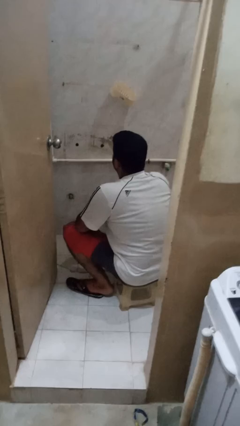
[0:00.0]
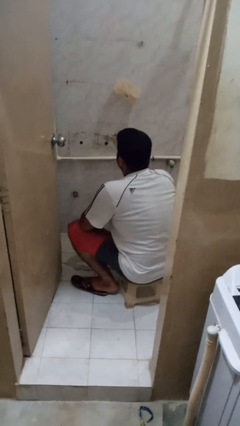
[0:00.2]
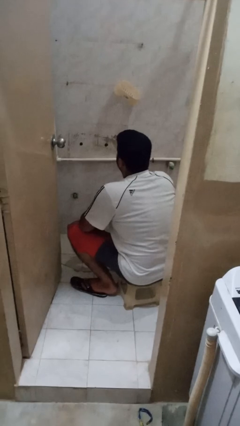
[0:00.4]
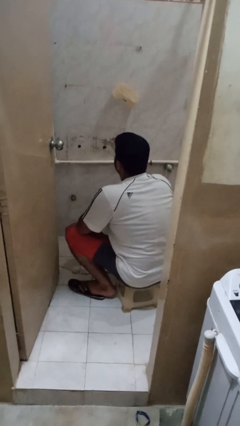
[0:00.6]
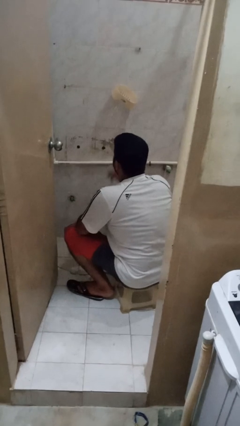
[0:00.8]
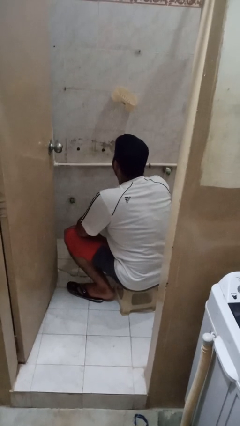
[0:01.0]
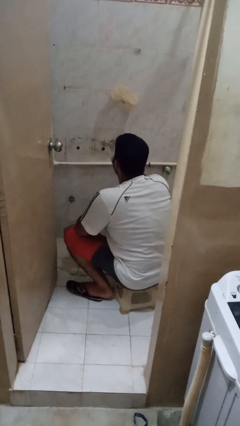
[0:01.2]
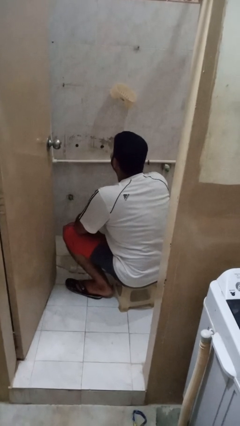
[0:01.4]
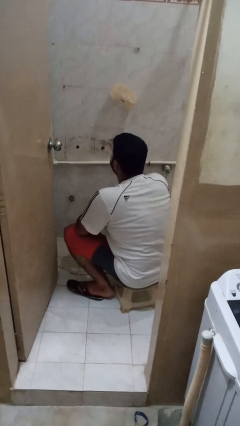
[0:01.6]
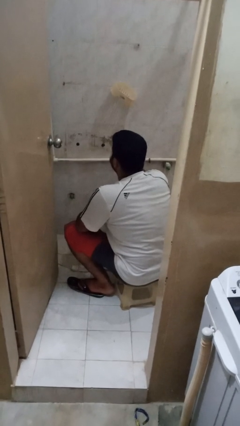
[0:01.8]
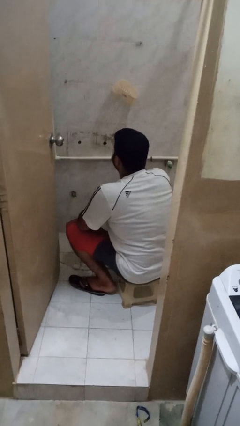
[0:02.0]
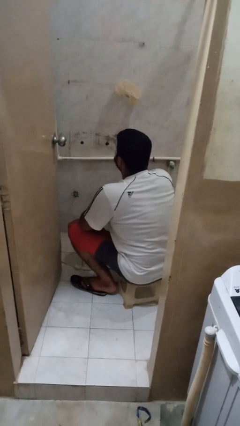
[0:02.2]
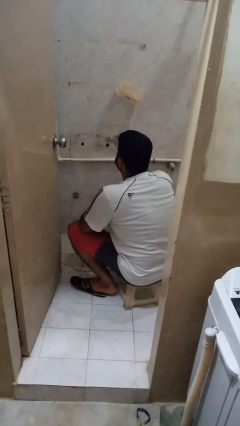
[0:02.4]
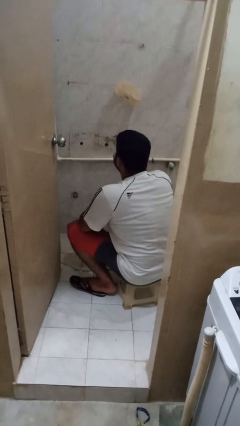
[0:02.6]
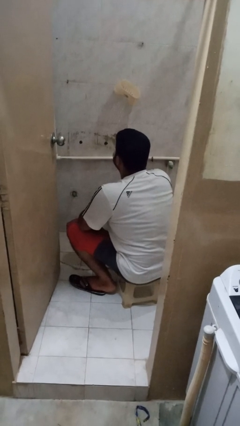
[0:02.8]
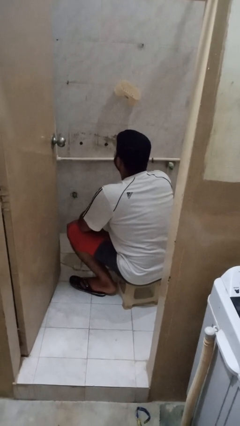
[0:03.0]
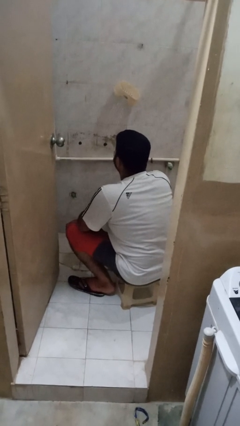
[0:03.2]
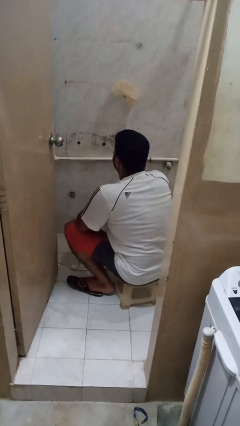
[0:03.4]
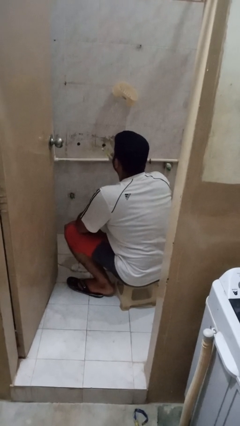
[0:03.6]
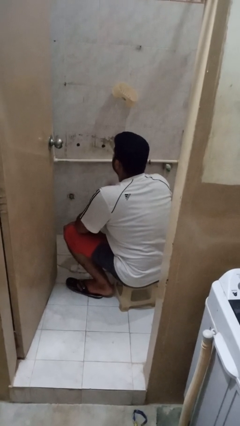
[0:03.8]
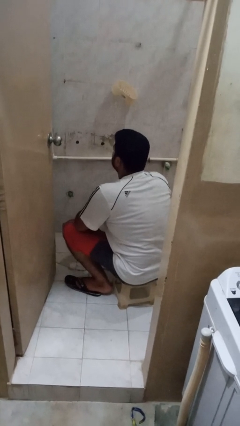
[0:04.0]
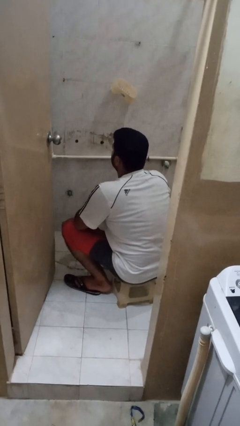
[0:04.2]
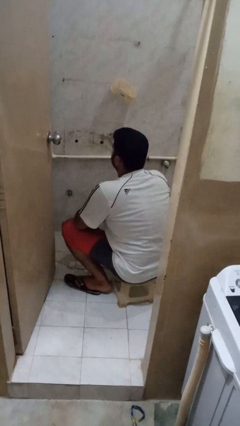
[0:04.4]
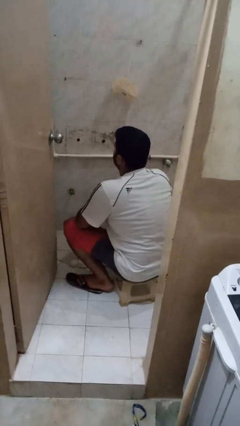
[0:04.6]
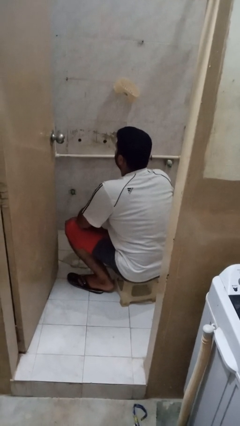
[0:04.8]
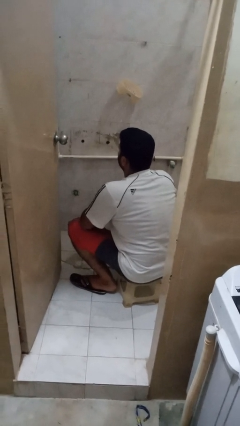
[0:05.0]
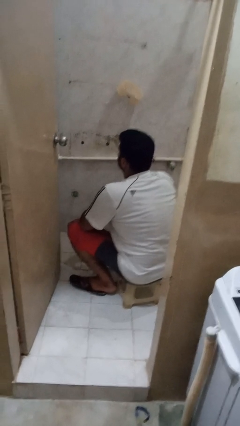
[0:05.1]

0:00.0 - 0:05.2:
person brushes teeth

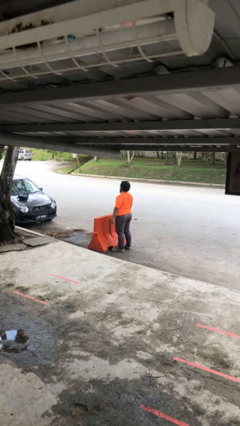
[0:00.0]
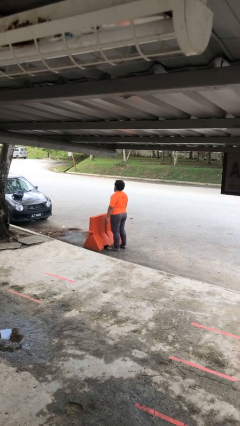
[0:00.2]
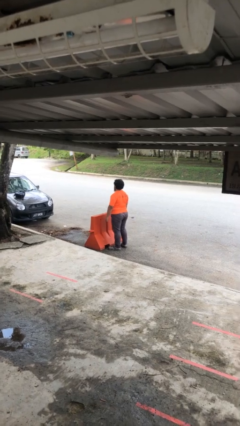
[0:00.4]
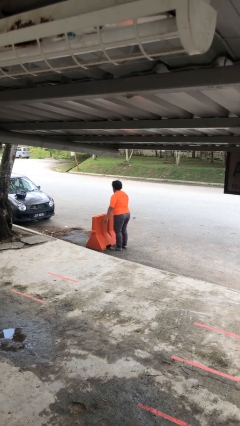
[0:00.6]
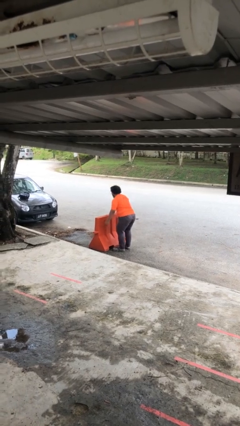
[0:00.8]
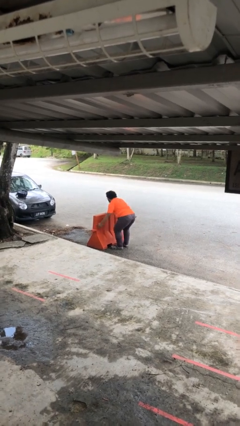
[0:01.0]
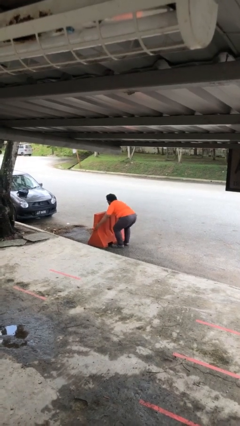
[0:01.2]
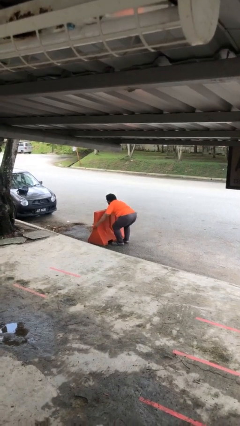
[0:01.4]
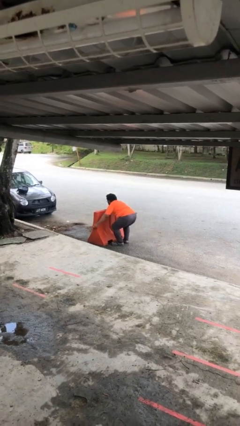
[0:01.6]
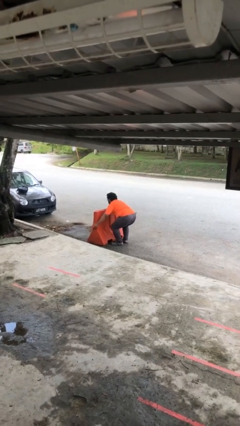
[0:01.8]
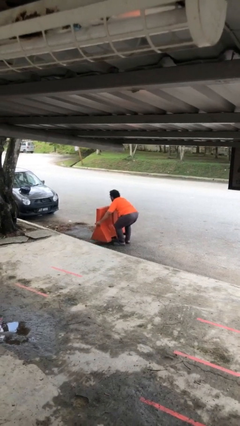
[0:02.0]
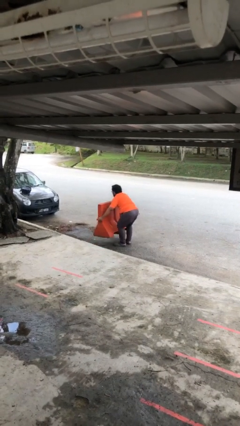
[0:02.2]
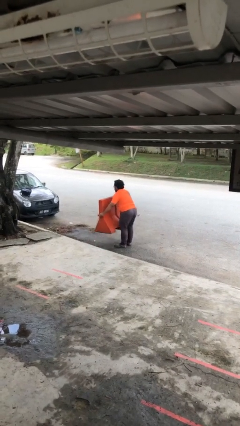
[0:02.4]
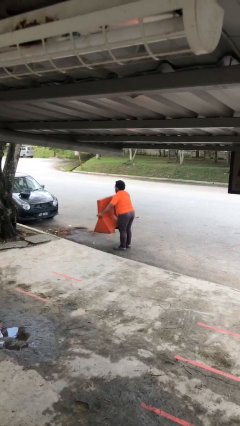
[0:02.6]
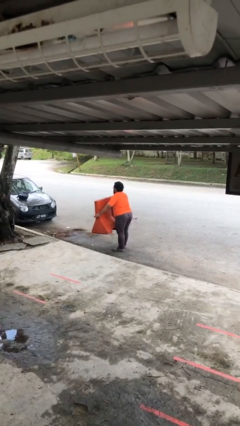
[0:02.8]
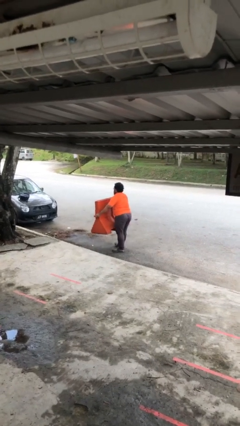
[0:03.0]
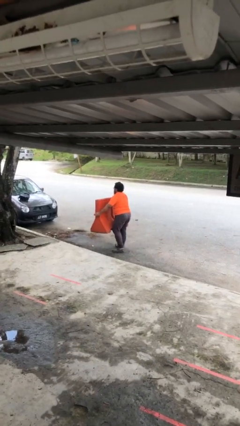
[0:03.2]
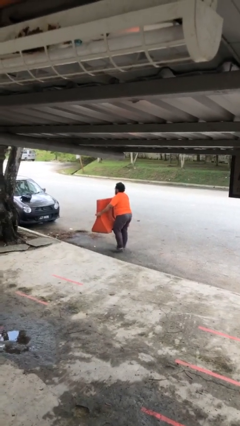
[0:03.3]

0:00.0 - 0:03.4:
person picks up object from floor

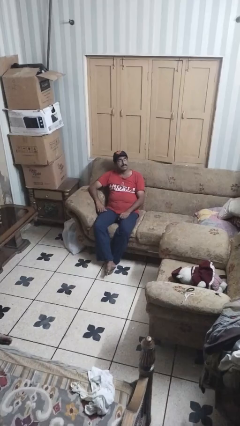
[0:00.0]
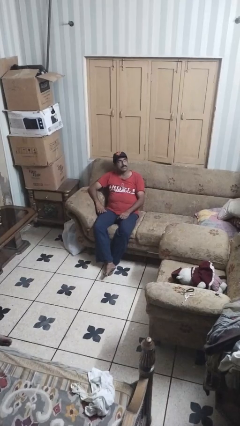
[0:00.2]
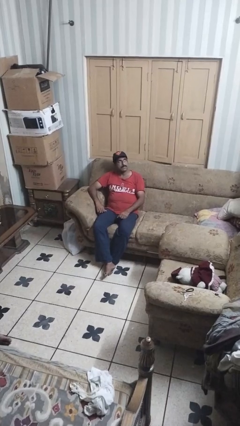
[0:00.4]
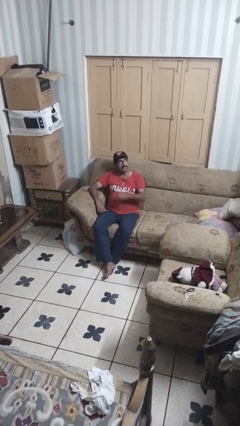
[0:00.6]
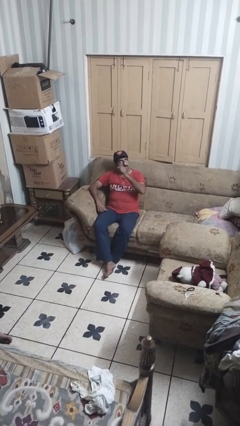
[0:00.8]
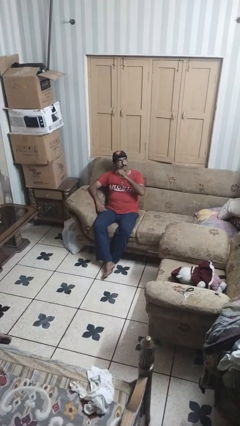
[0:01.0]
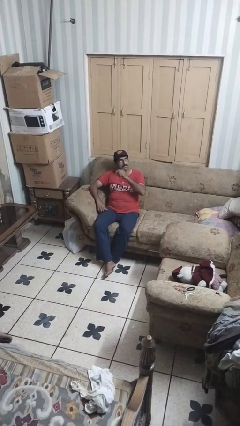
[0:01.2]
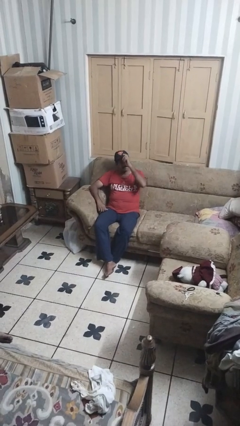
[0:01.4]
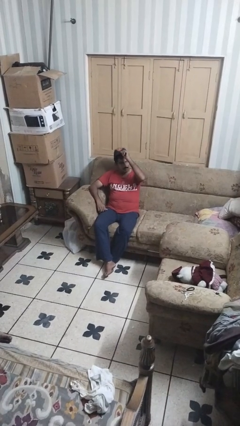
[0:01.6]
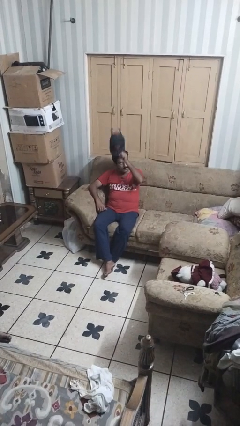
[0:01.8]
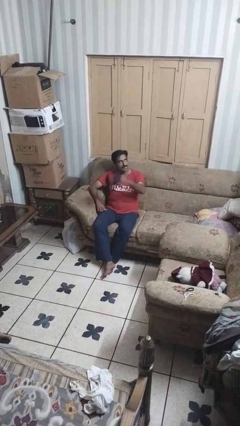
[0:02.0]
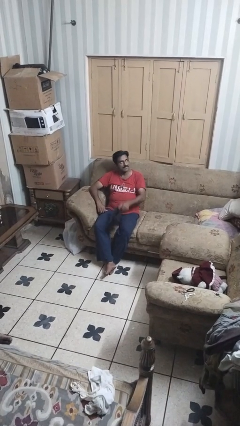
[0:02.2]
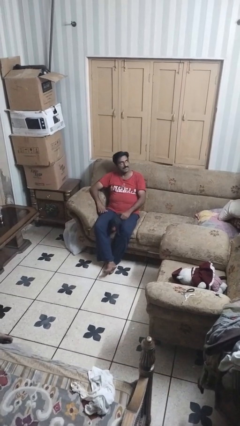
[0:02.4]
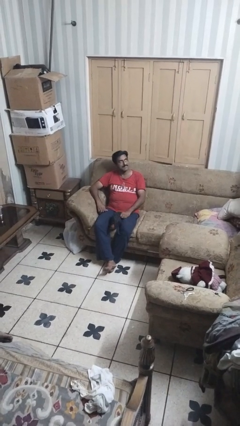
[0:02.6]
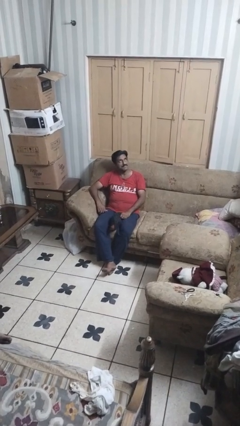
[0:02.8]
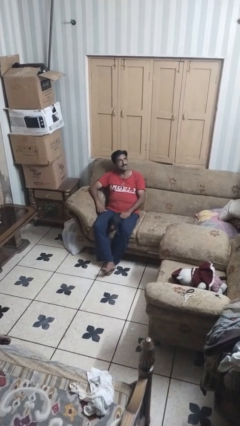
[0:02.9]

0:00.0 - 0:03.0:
person takes off hat

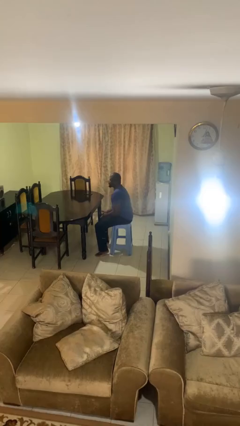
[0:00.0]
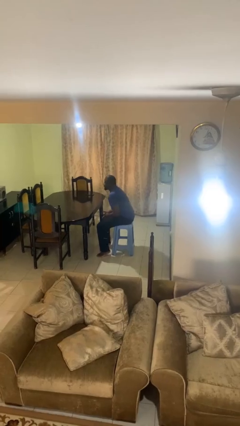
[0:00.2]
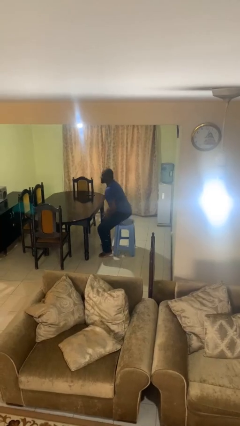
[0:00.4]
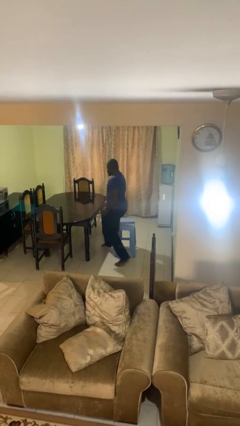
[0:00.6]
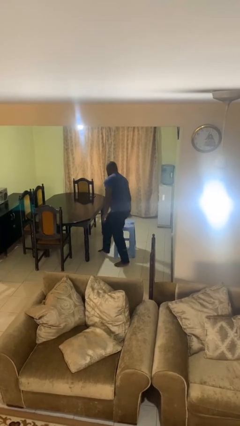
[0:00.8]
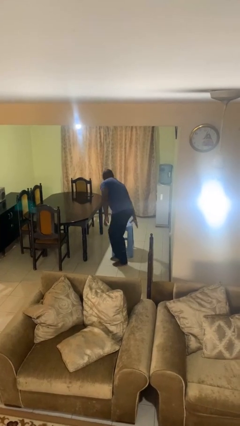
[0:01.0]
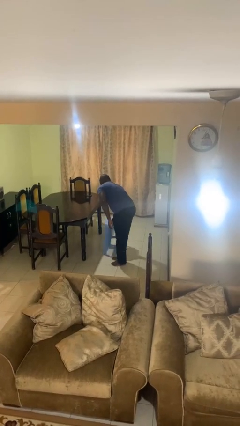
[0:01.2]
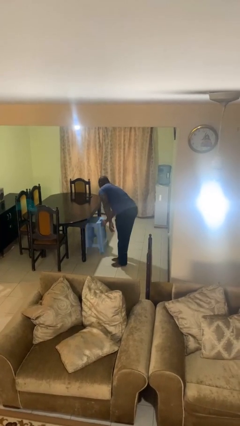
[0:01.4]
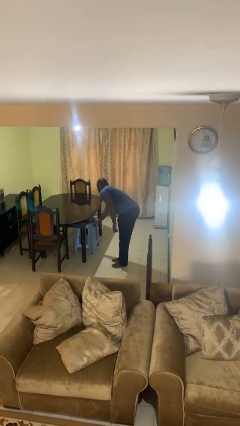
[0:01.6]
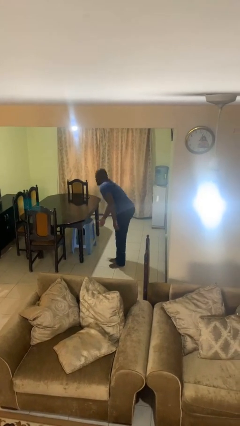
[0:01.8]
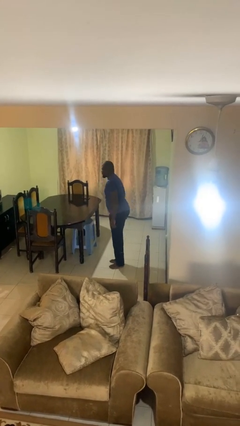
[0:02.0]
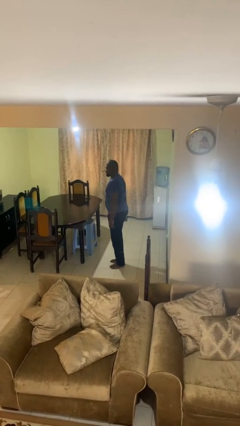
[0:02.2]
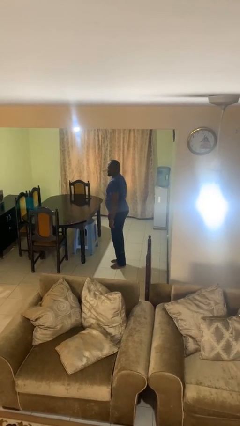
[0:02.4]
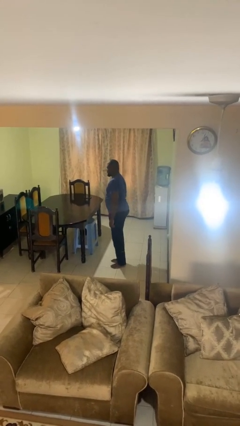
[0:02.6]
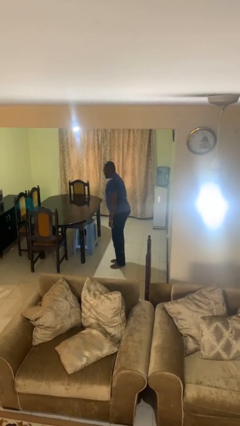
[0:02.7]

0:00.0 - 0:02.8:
person stands up

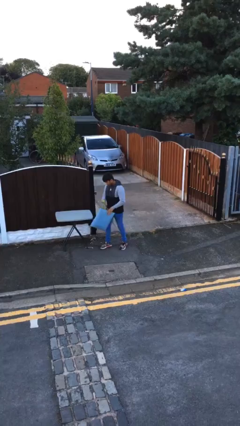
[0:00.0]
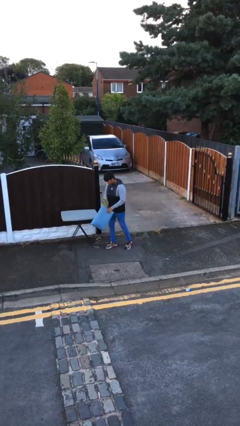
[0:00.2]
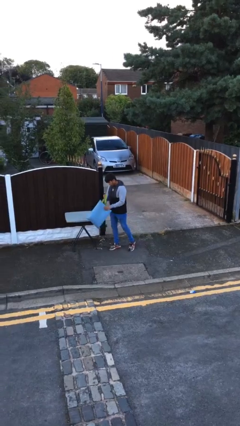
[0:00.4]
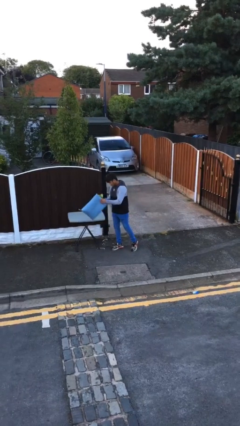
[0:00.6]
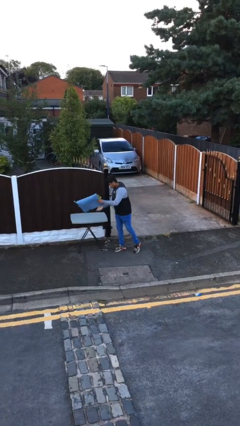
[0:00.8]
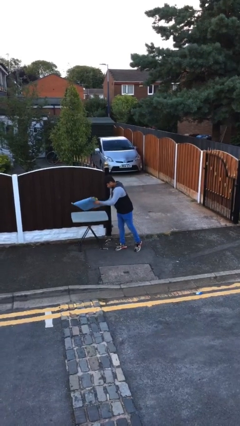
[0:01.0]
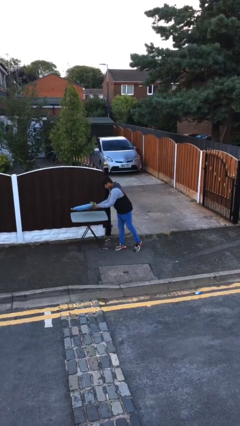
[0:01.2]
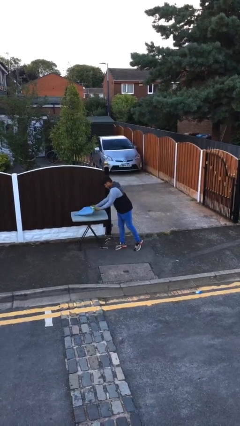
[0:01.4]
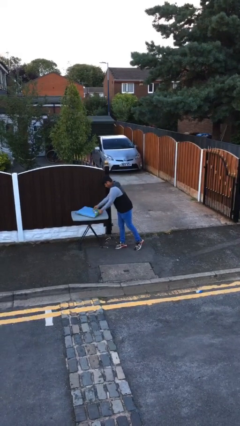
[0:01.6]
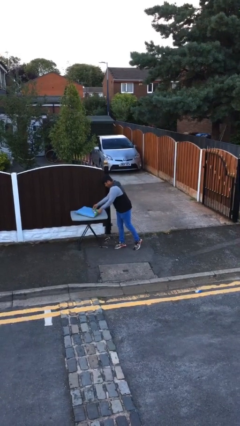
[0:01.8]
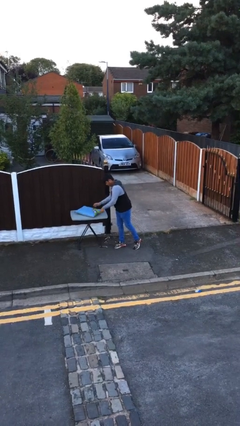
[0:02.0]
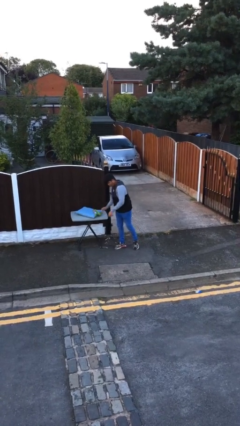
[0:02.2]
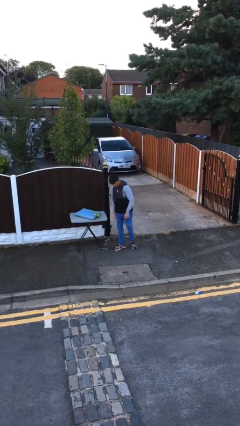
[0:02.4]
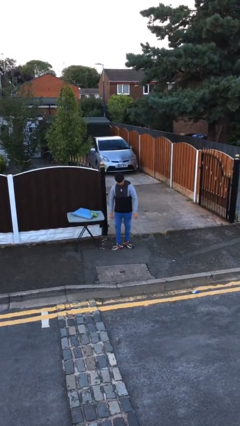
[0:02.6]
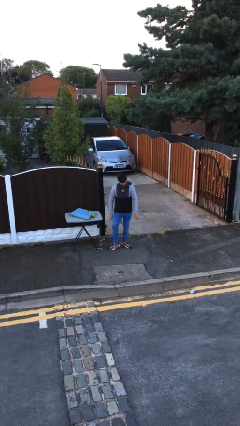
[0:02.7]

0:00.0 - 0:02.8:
person puts down object on table

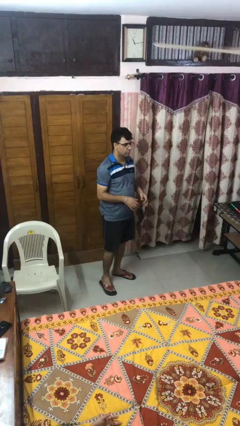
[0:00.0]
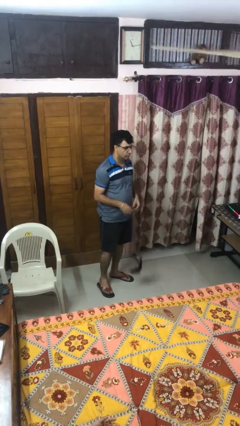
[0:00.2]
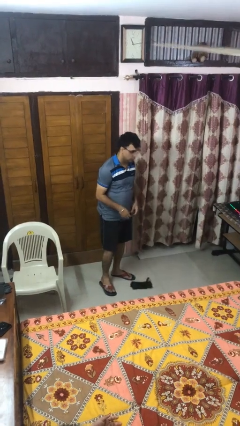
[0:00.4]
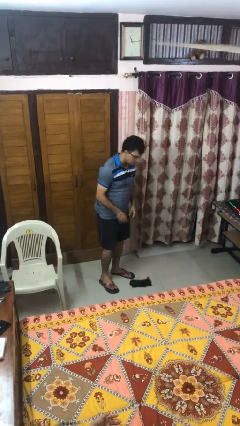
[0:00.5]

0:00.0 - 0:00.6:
person drops object
